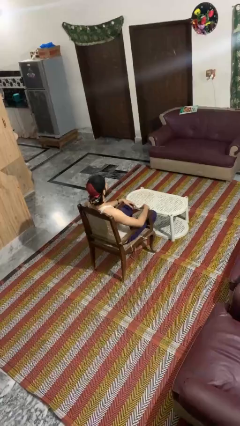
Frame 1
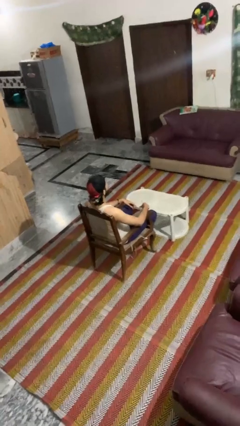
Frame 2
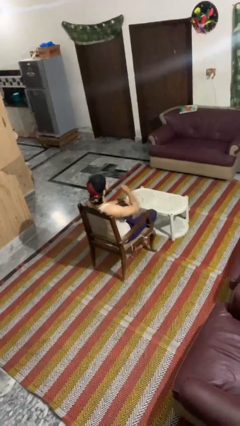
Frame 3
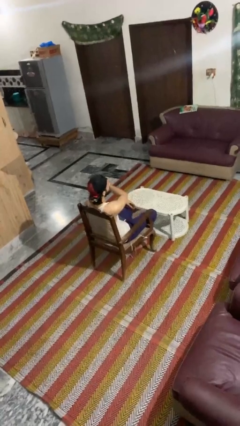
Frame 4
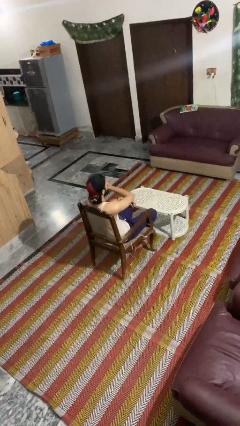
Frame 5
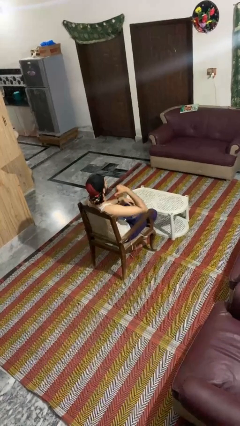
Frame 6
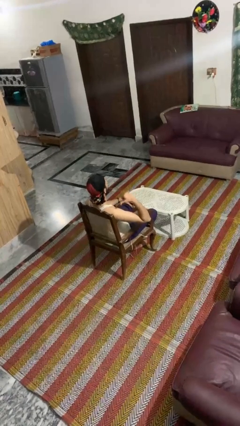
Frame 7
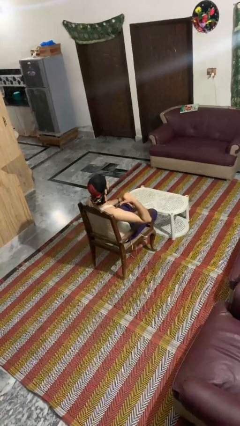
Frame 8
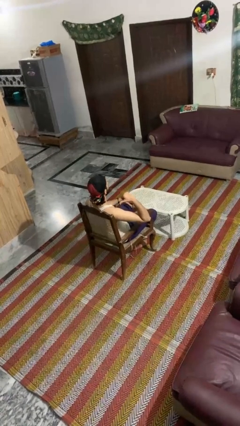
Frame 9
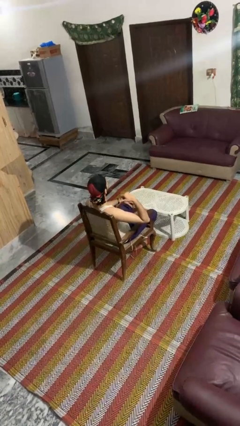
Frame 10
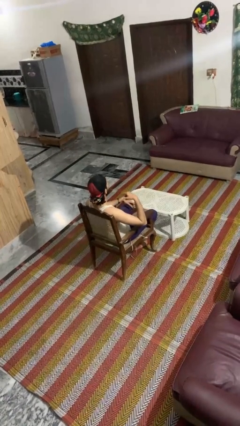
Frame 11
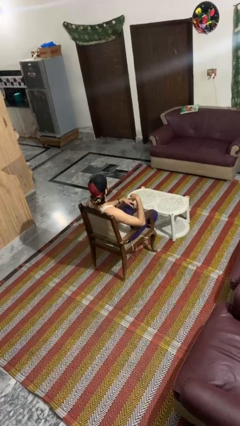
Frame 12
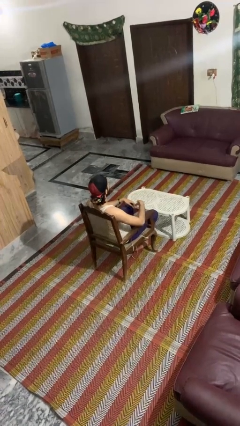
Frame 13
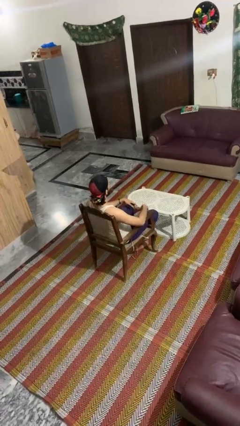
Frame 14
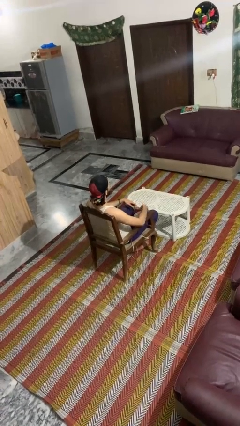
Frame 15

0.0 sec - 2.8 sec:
person gestures cut

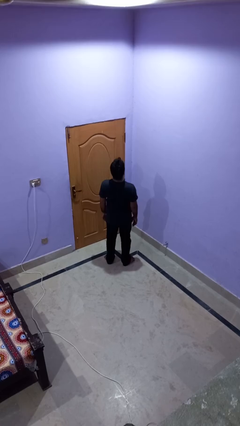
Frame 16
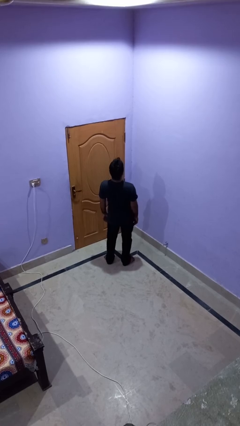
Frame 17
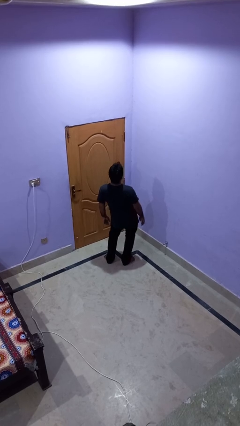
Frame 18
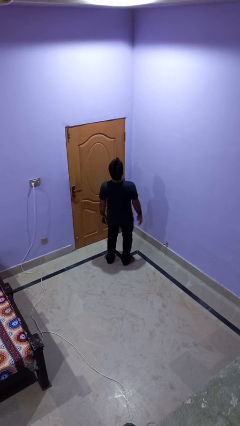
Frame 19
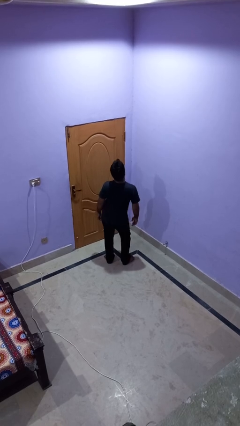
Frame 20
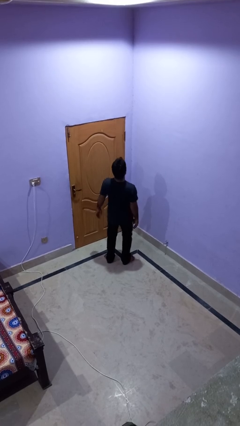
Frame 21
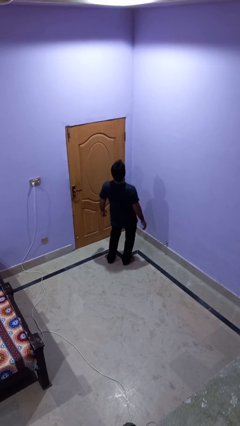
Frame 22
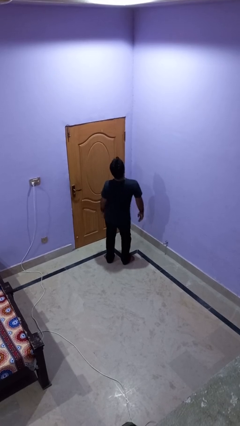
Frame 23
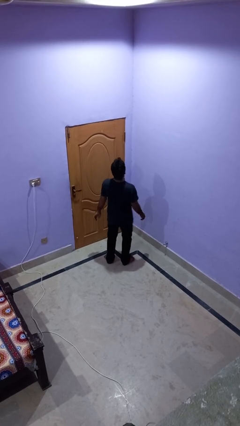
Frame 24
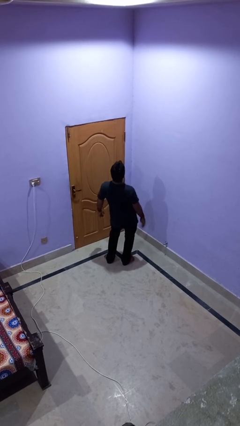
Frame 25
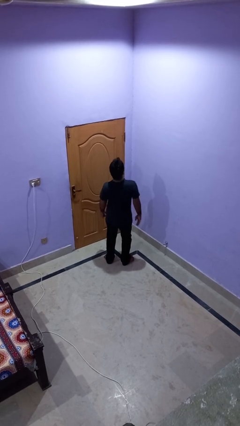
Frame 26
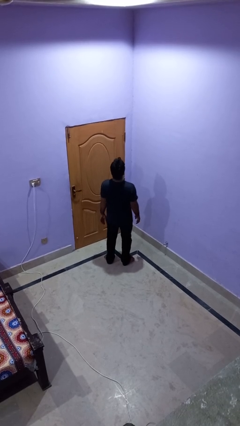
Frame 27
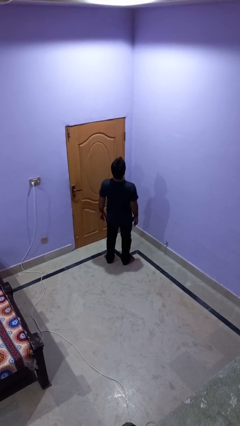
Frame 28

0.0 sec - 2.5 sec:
person wiggles hips

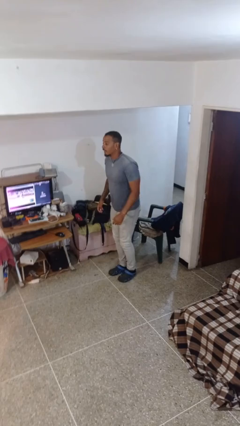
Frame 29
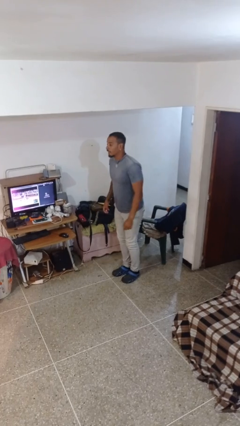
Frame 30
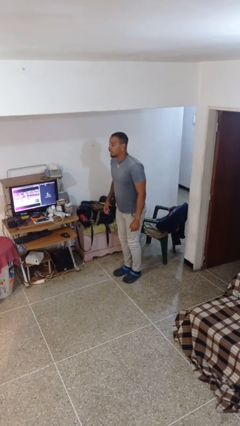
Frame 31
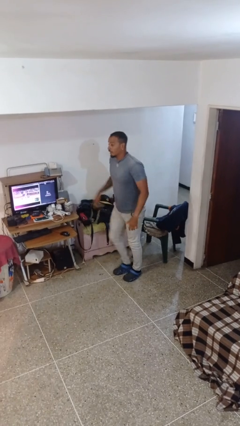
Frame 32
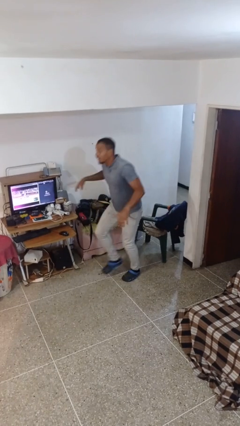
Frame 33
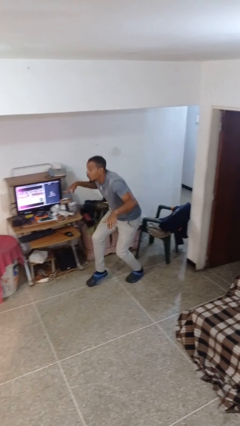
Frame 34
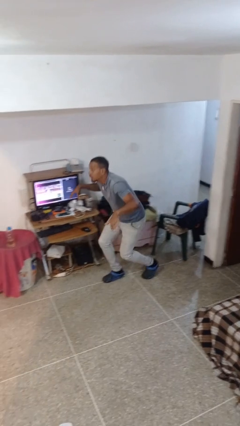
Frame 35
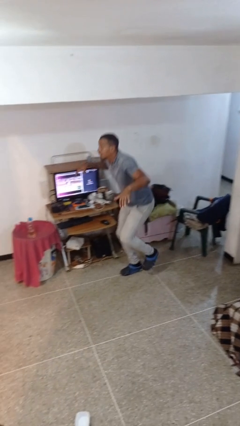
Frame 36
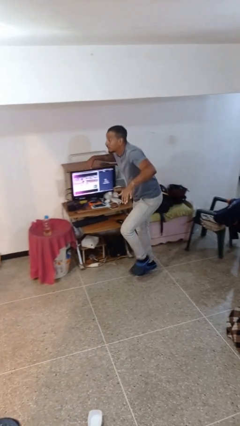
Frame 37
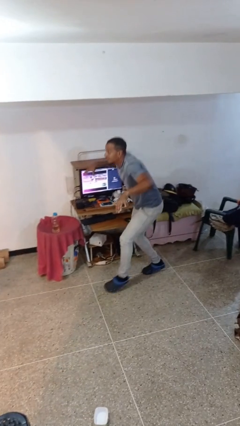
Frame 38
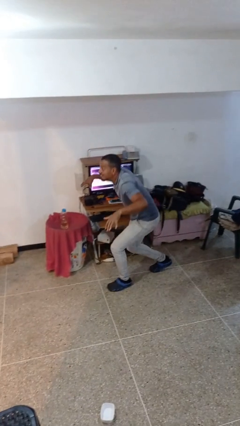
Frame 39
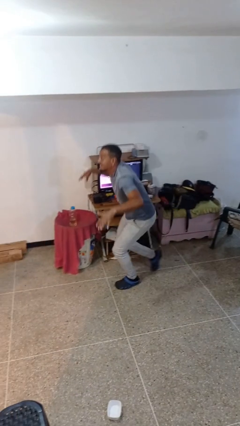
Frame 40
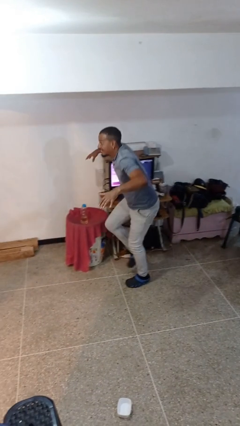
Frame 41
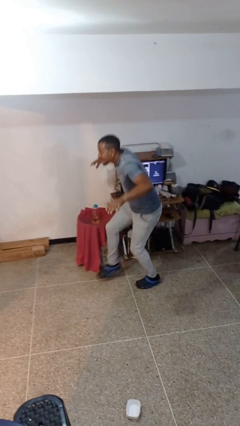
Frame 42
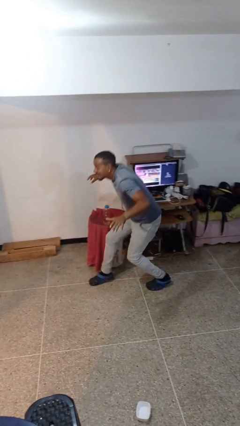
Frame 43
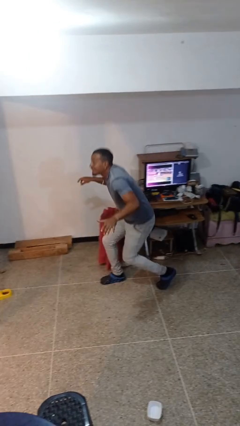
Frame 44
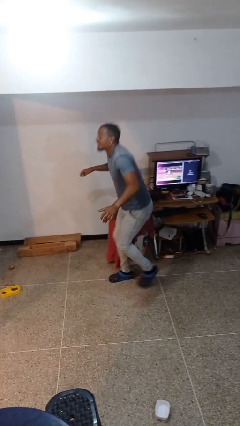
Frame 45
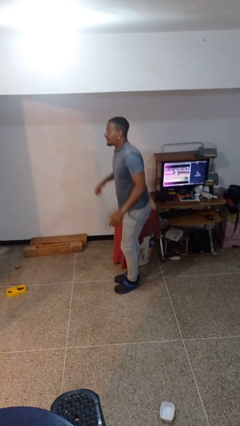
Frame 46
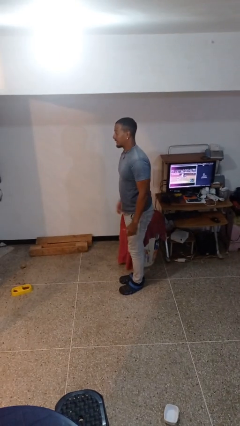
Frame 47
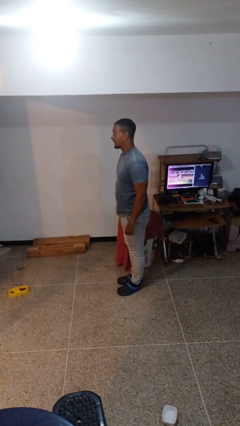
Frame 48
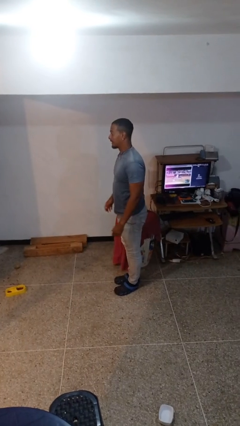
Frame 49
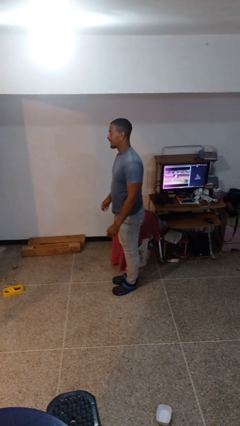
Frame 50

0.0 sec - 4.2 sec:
person walks tiptoe

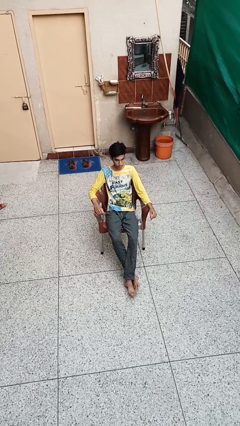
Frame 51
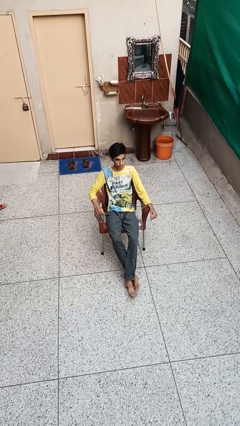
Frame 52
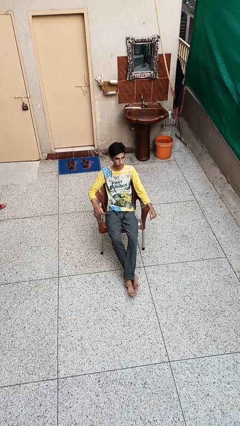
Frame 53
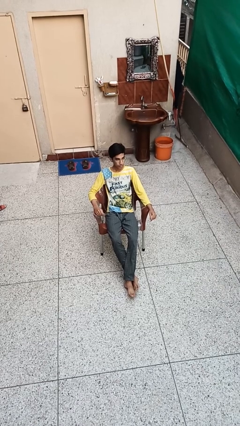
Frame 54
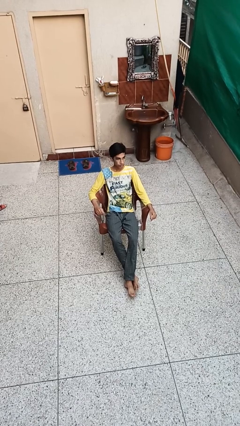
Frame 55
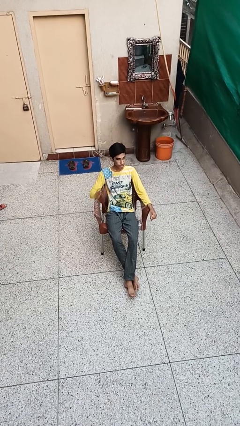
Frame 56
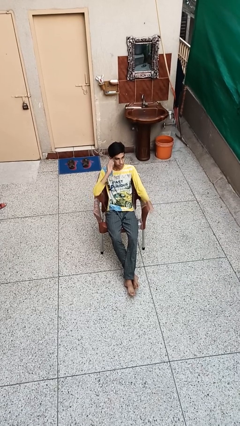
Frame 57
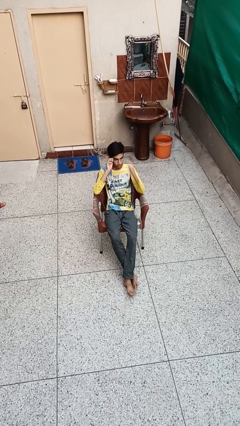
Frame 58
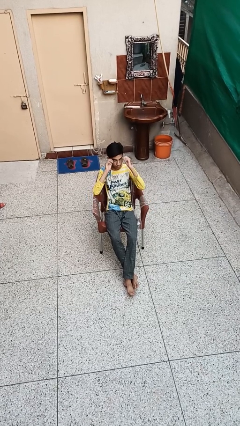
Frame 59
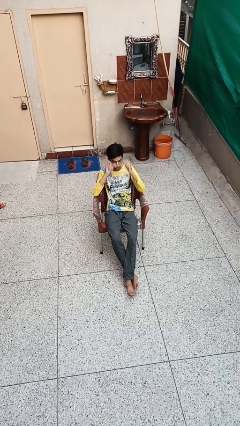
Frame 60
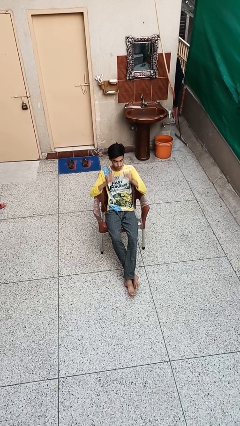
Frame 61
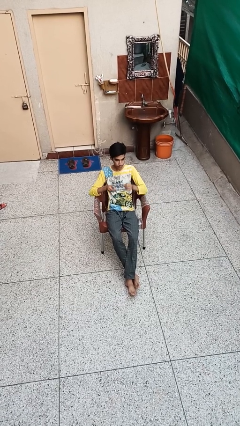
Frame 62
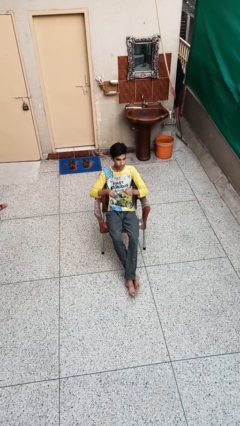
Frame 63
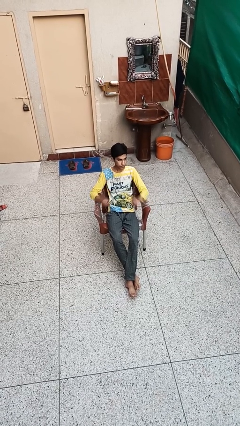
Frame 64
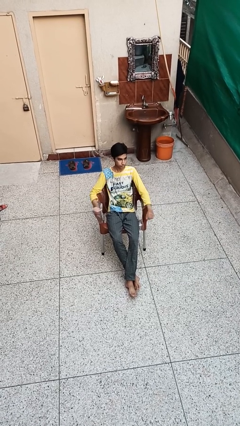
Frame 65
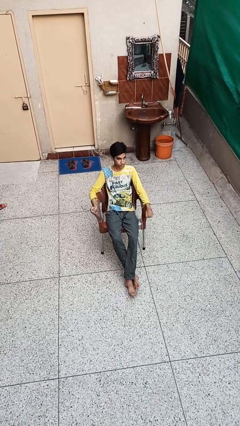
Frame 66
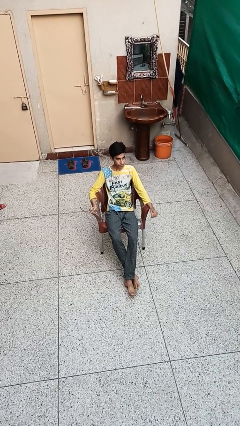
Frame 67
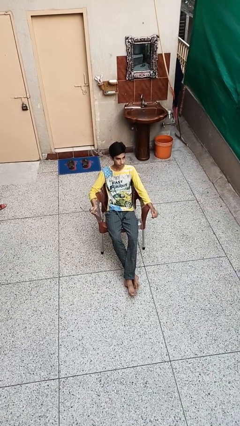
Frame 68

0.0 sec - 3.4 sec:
person takes off glasses

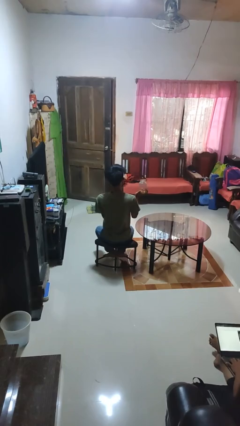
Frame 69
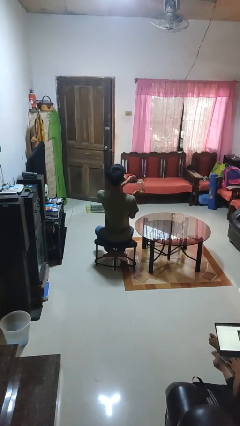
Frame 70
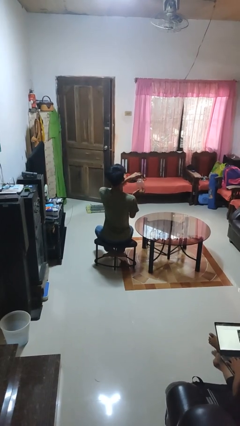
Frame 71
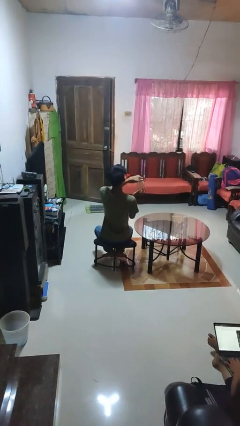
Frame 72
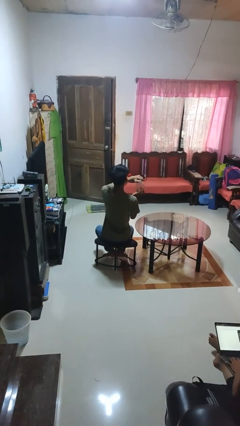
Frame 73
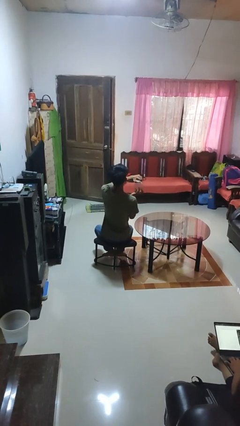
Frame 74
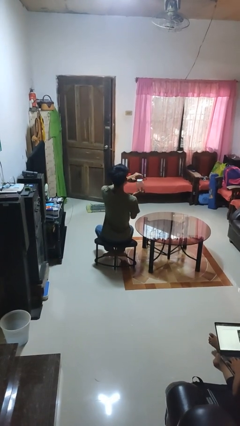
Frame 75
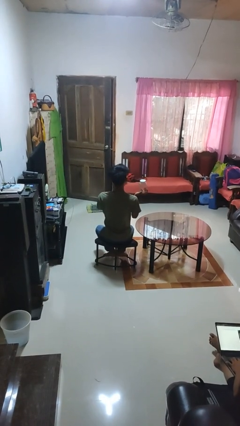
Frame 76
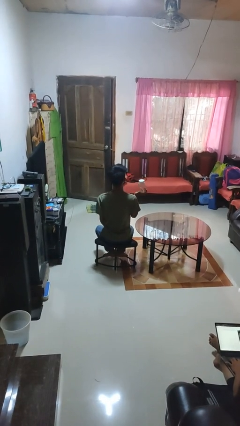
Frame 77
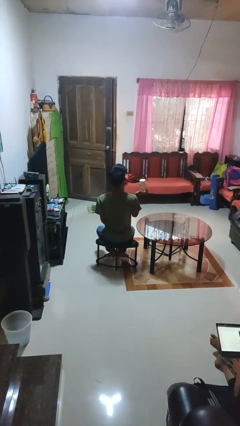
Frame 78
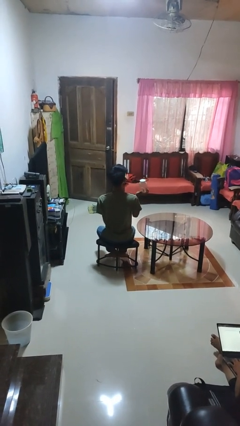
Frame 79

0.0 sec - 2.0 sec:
person closes jar

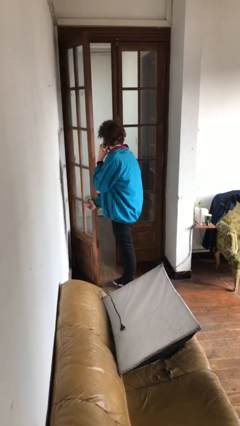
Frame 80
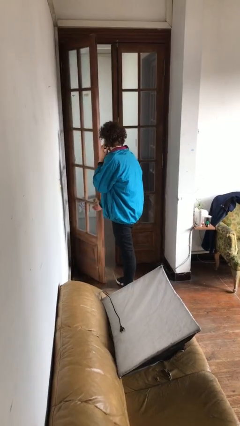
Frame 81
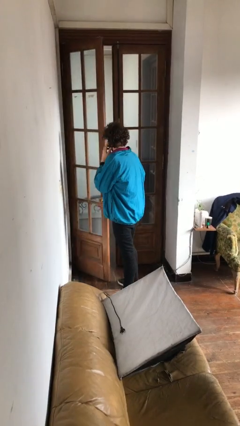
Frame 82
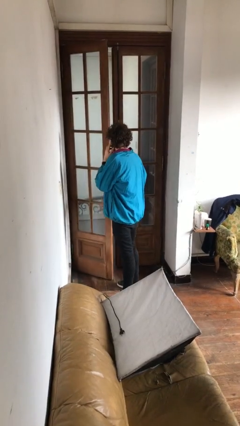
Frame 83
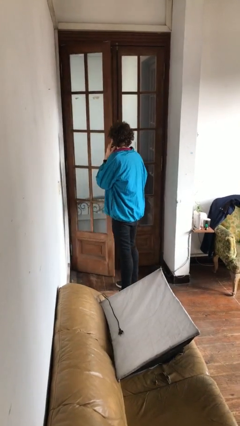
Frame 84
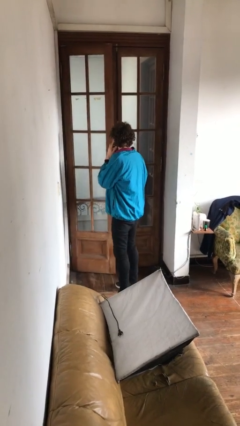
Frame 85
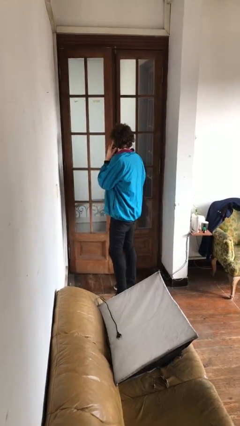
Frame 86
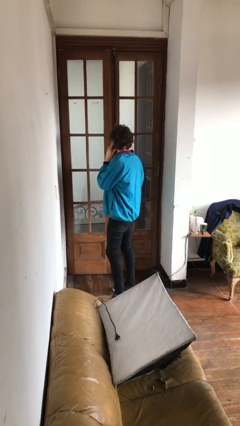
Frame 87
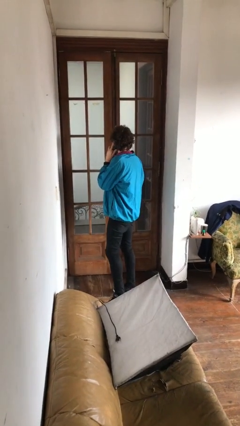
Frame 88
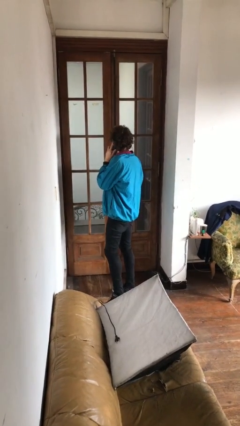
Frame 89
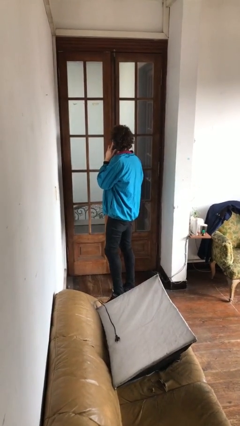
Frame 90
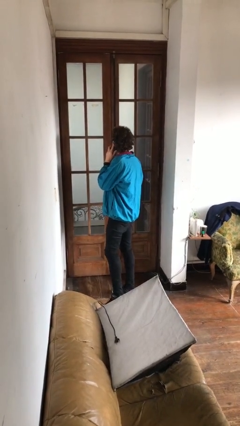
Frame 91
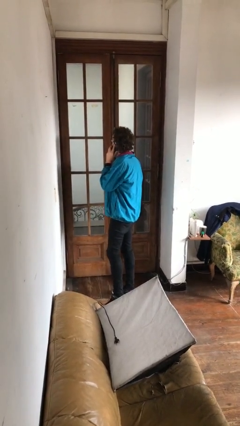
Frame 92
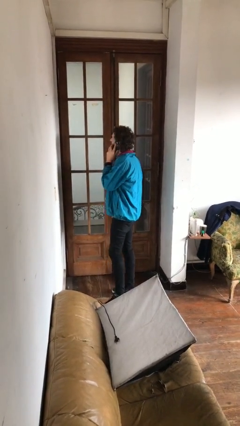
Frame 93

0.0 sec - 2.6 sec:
person closes facility door
